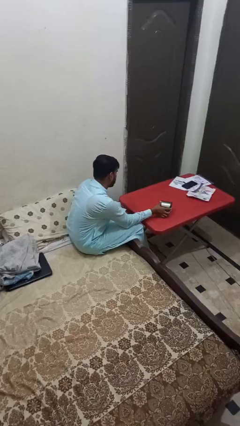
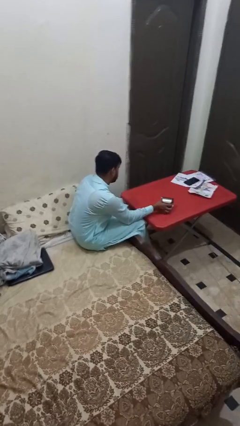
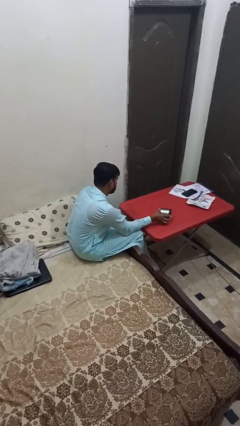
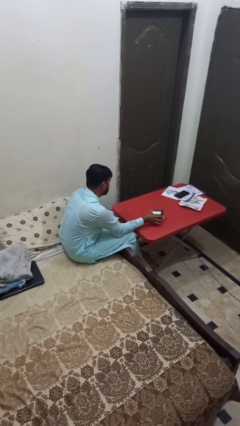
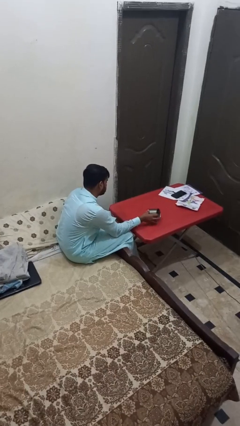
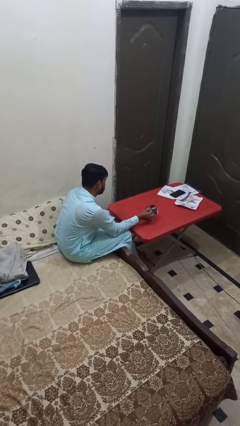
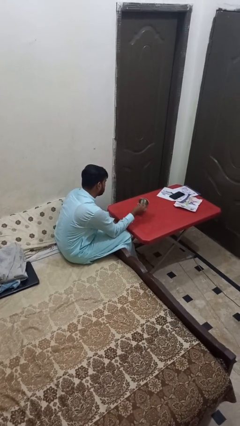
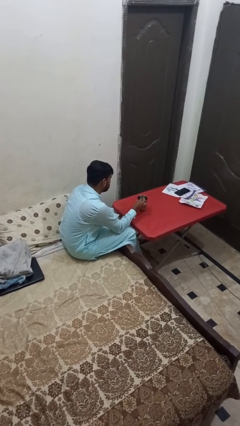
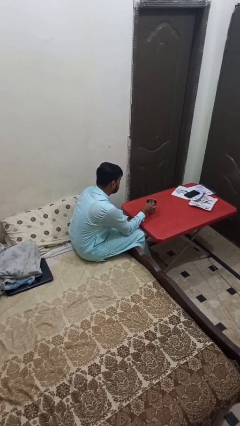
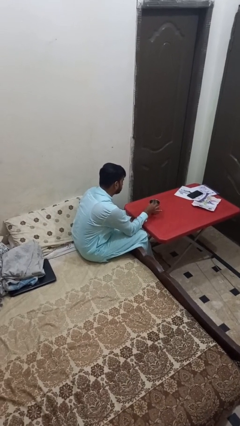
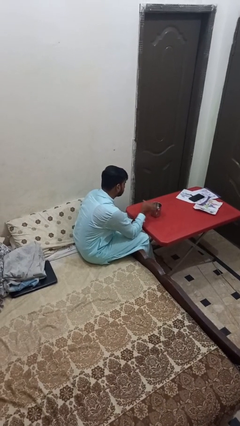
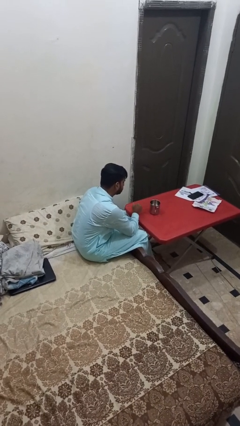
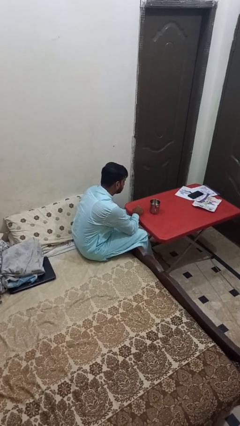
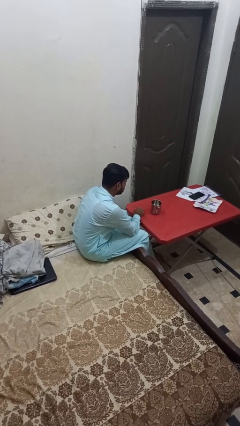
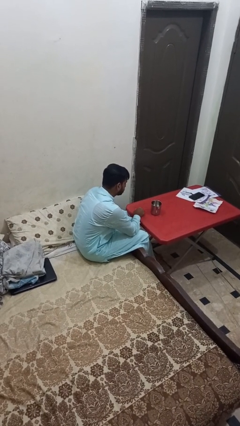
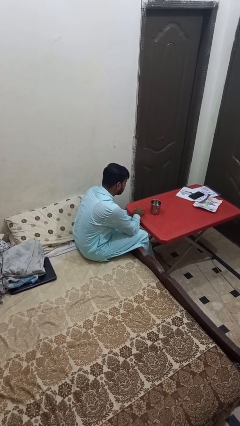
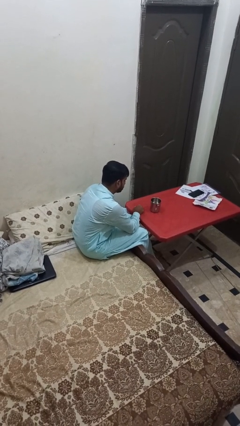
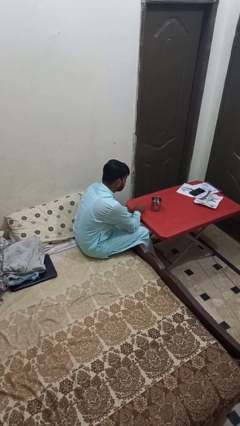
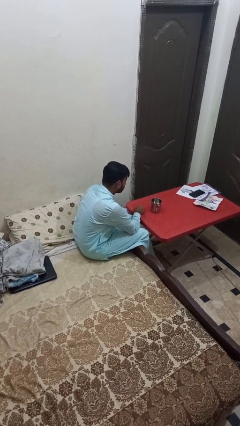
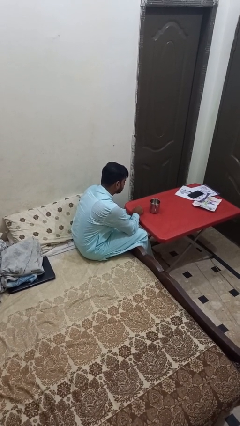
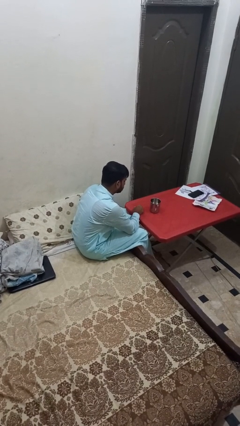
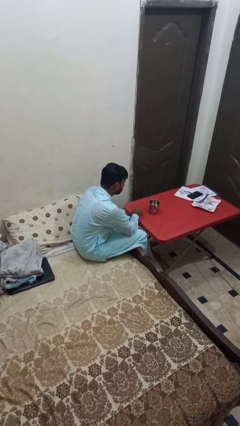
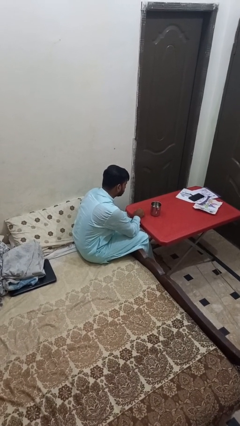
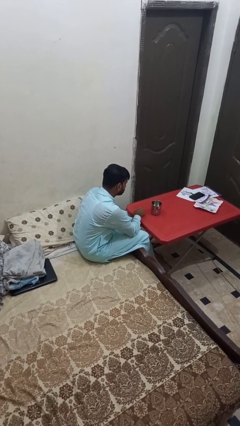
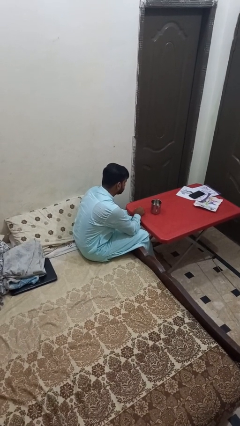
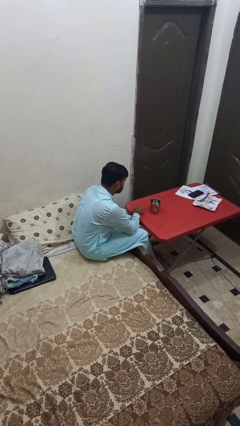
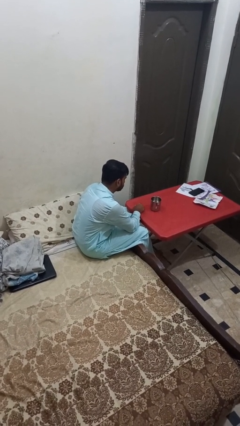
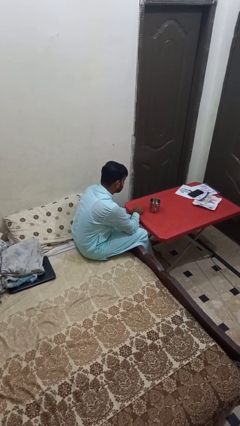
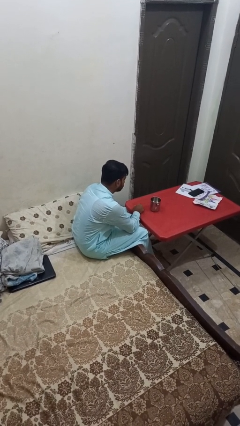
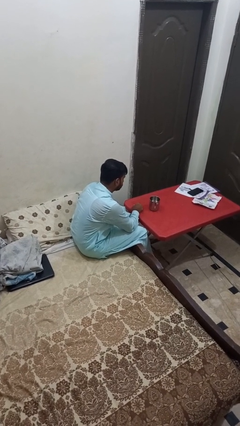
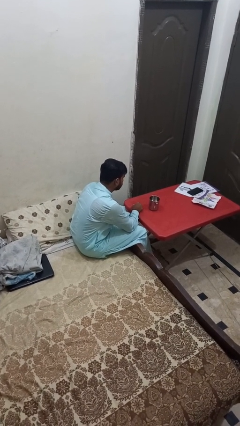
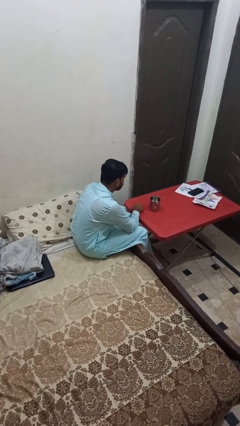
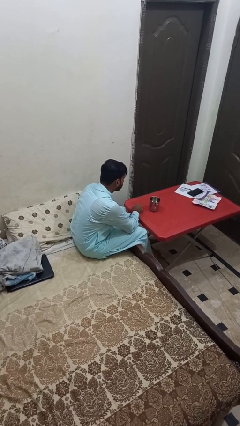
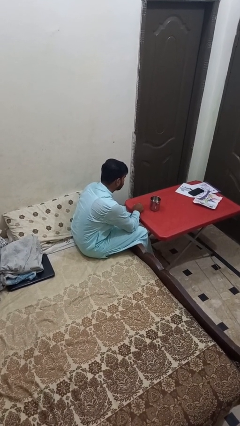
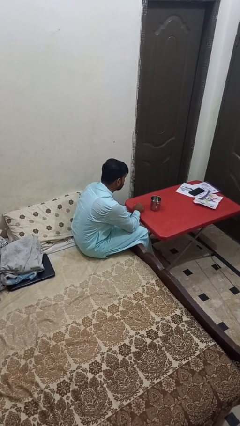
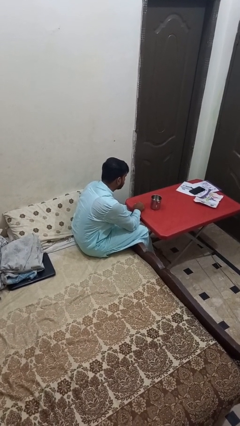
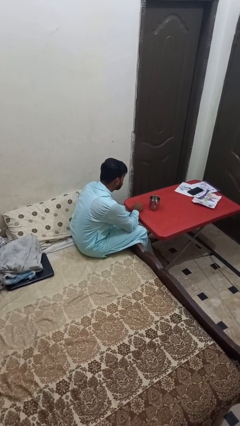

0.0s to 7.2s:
person sets upright glass

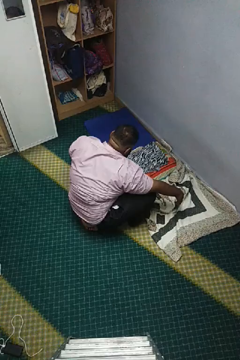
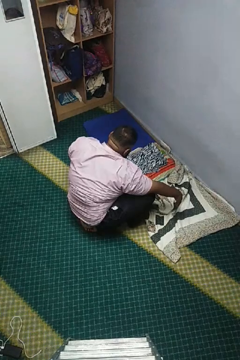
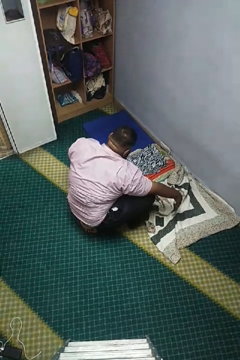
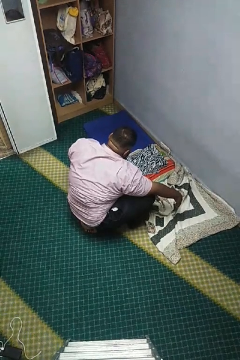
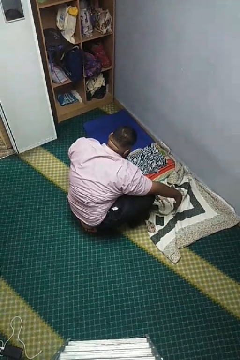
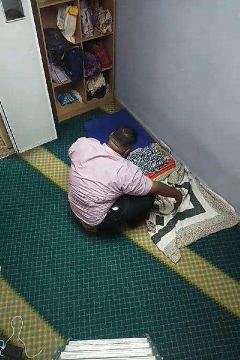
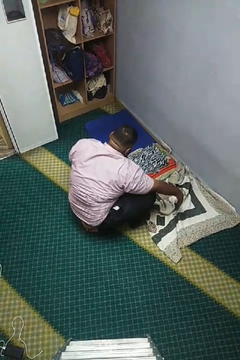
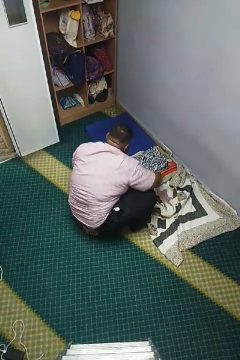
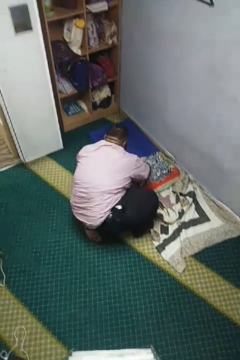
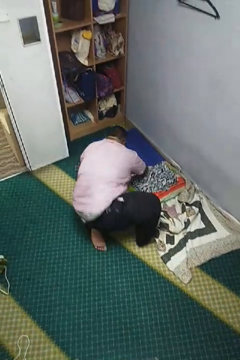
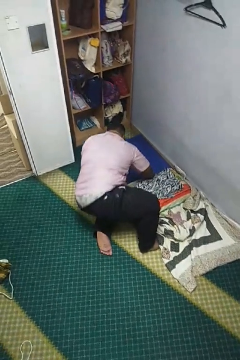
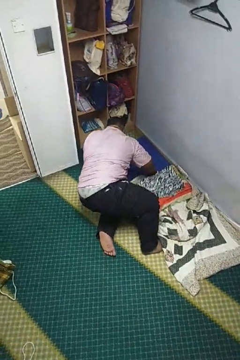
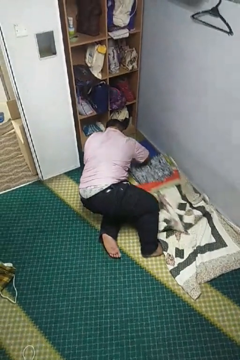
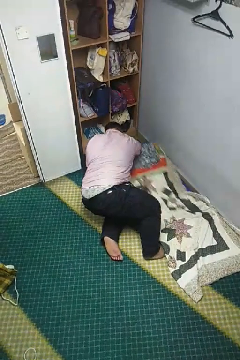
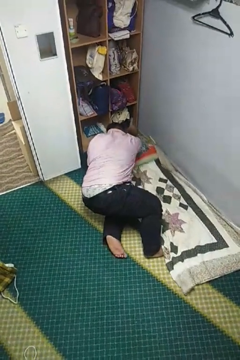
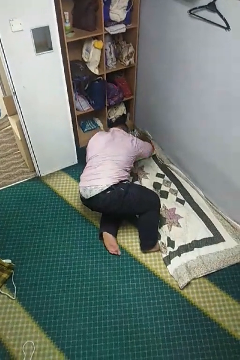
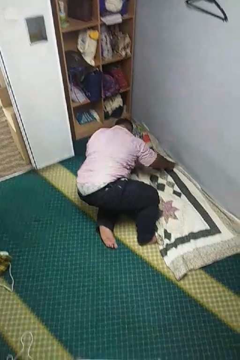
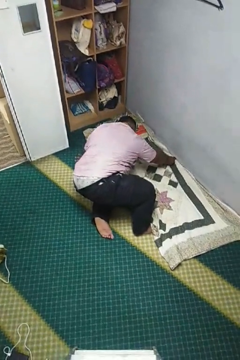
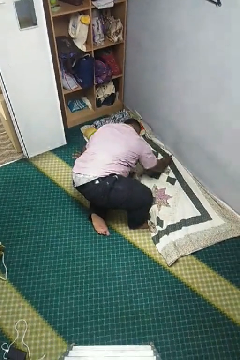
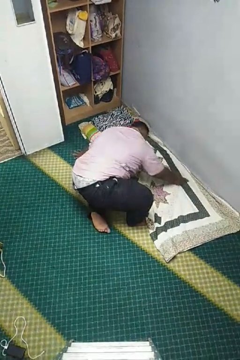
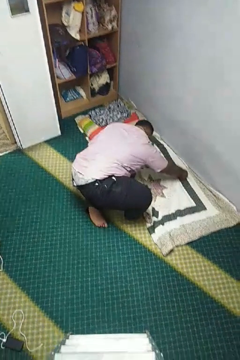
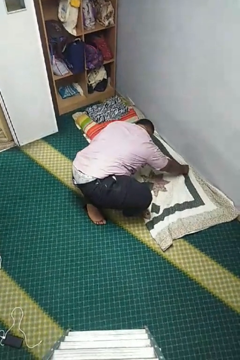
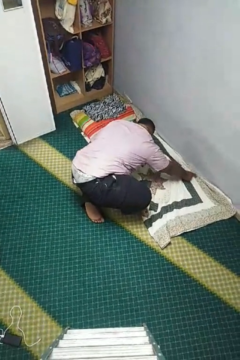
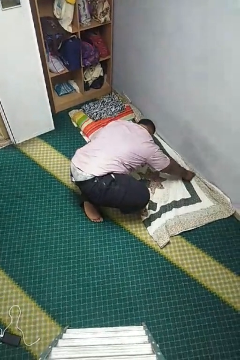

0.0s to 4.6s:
person makes bed

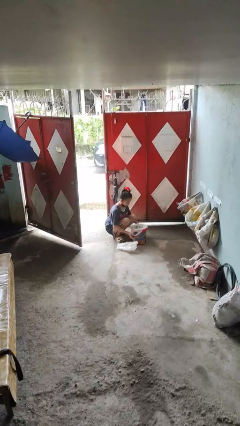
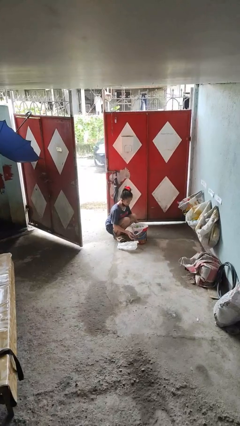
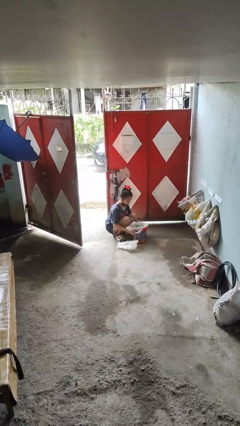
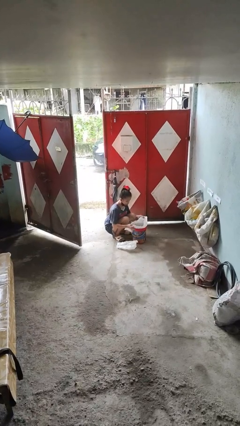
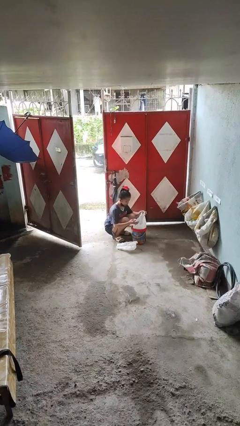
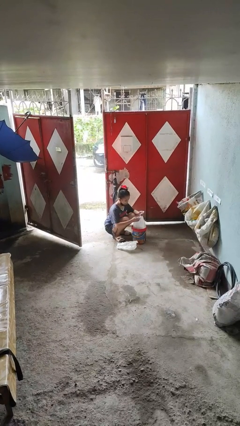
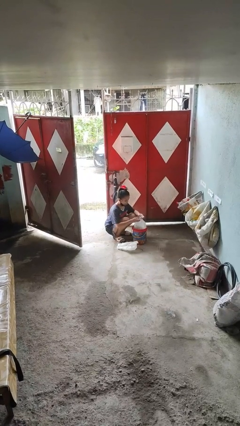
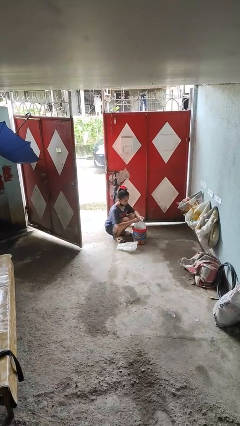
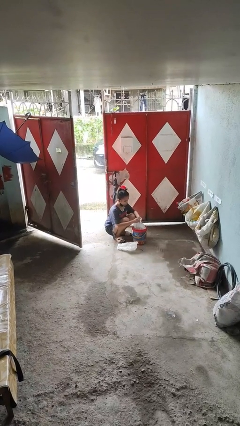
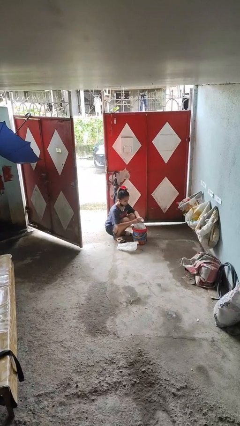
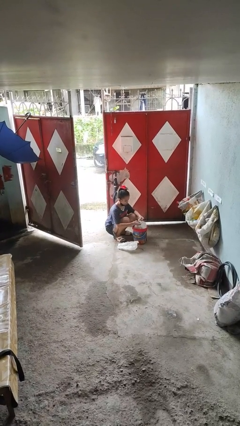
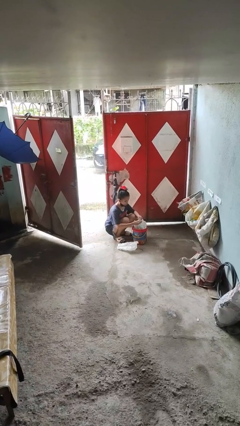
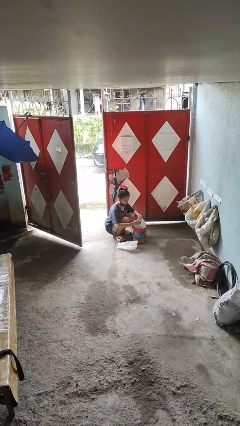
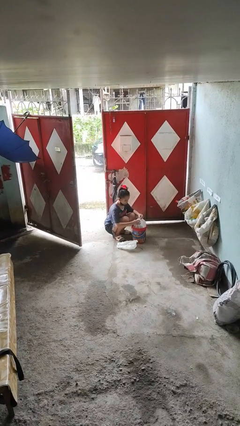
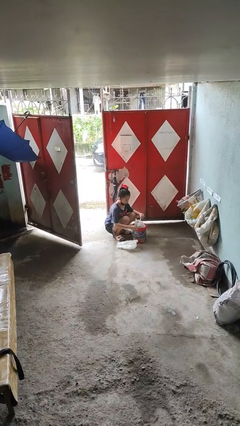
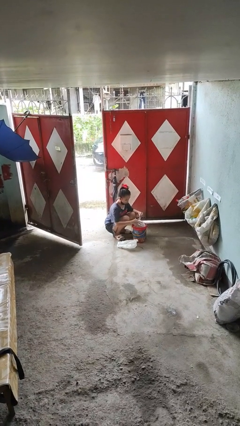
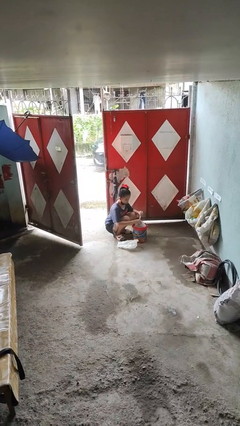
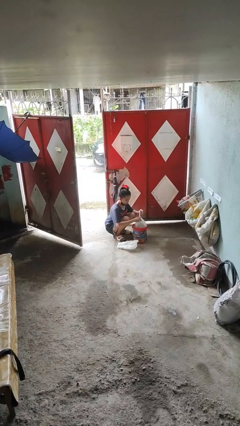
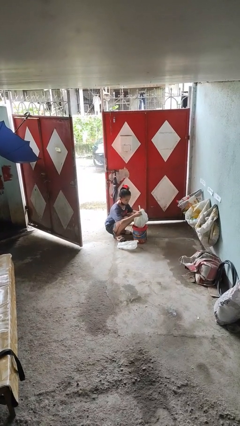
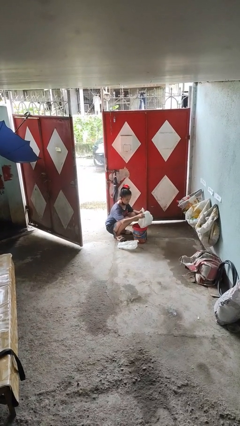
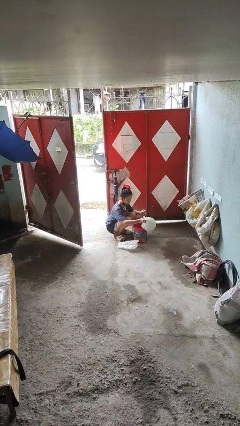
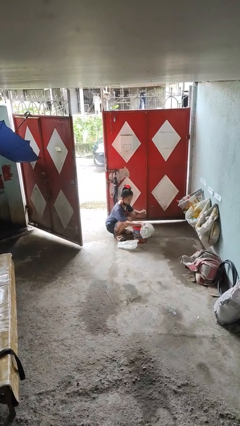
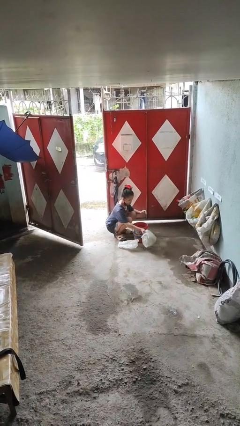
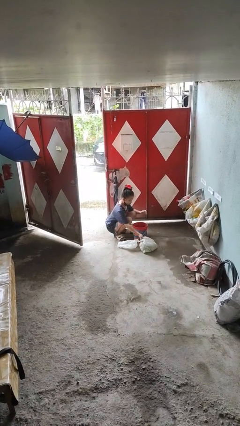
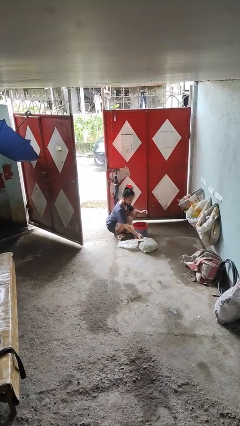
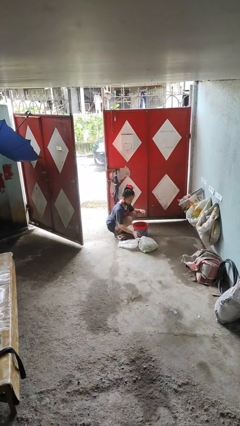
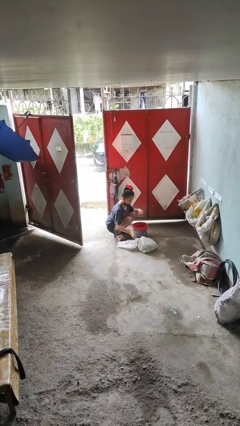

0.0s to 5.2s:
person removes trashbag from trashcan

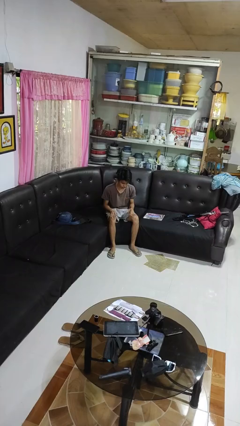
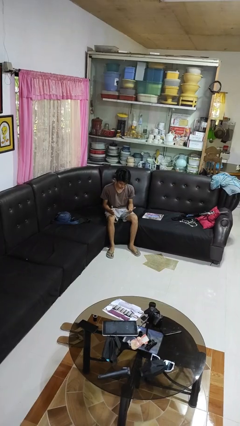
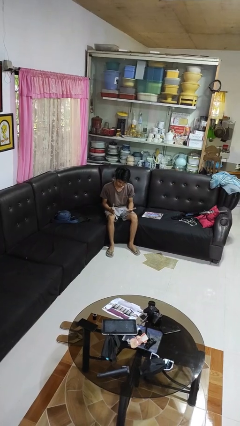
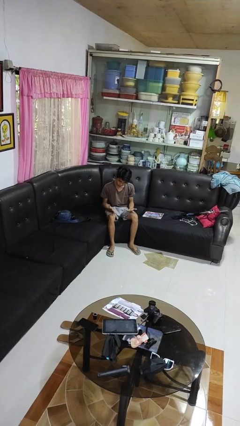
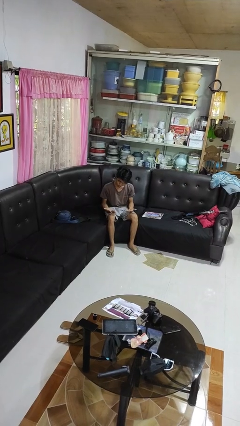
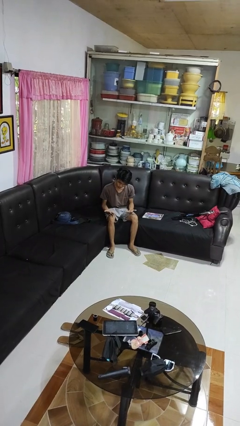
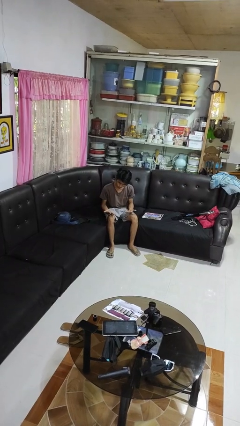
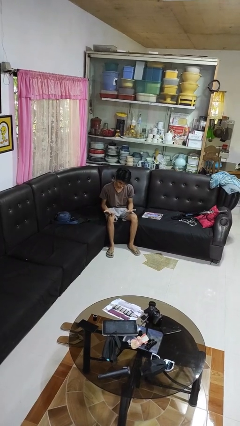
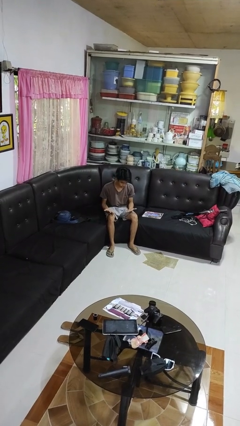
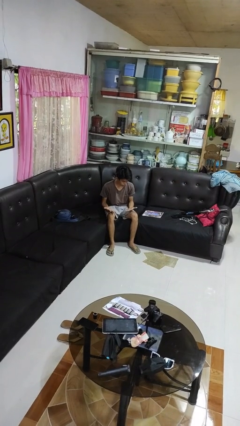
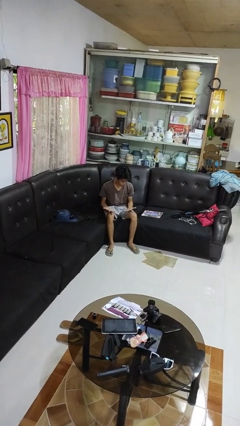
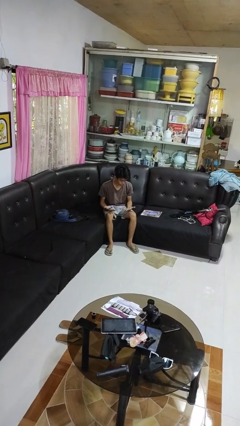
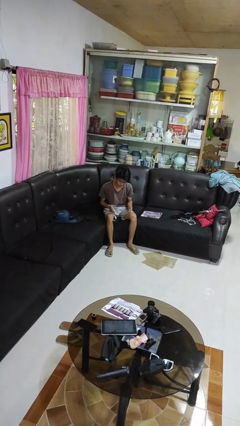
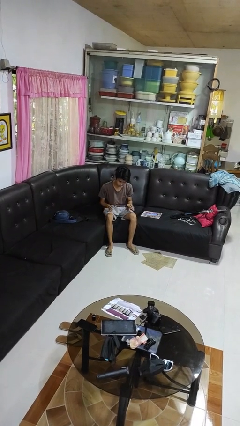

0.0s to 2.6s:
person looks at hands in lap
